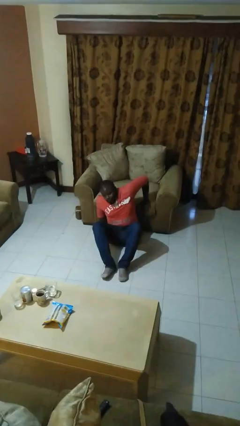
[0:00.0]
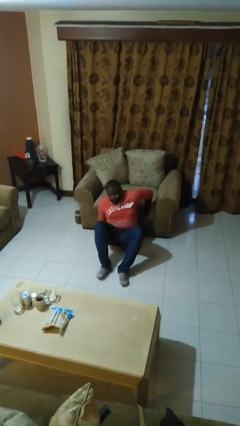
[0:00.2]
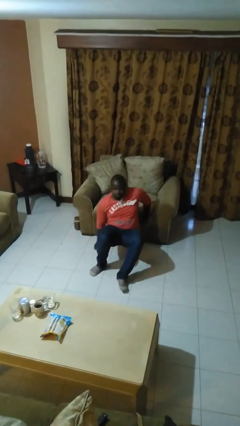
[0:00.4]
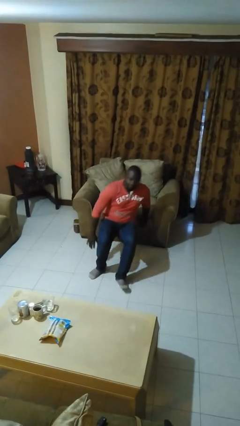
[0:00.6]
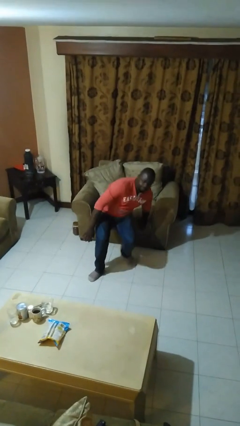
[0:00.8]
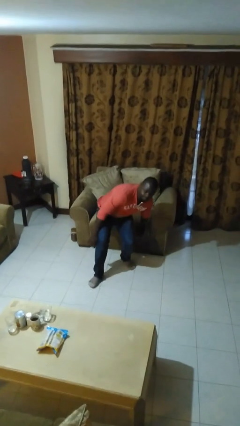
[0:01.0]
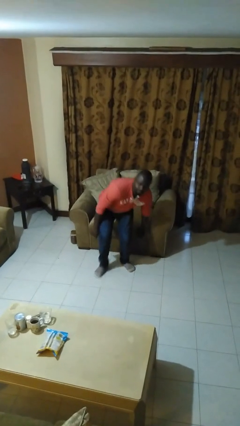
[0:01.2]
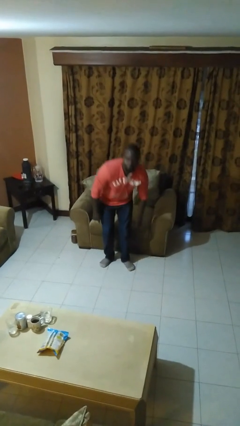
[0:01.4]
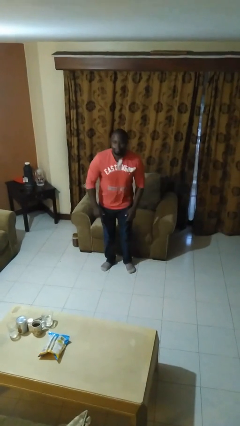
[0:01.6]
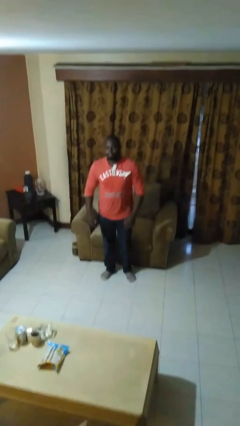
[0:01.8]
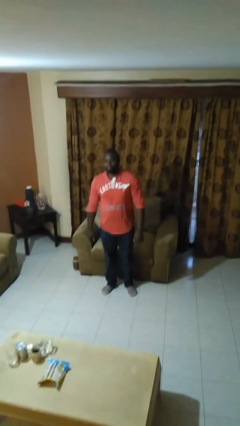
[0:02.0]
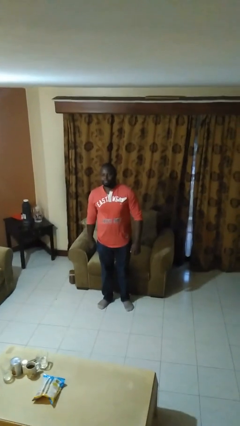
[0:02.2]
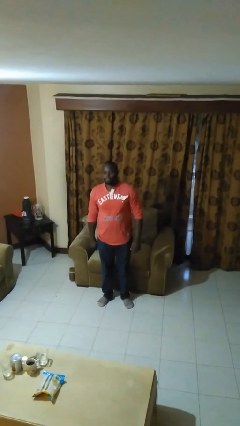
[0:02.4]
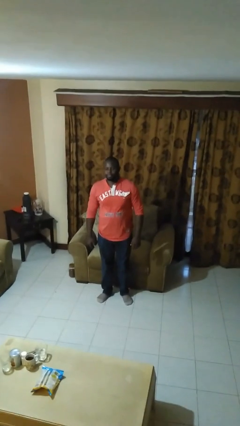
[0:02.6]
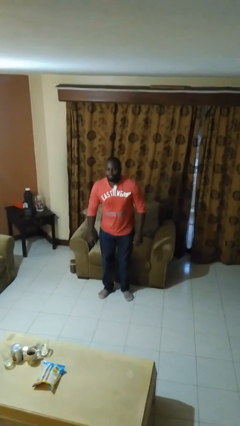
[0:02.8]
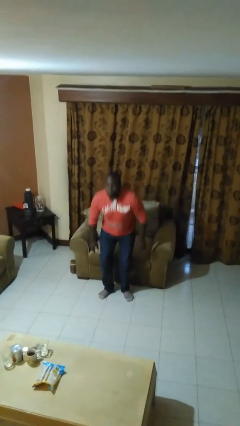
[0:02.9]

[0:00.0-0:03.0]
person stands up from floor

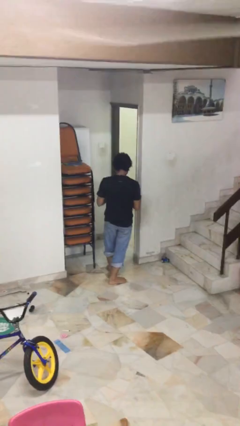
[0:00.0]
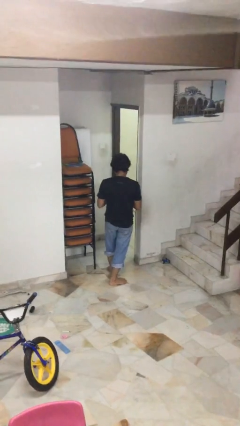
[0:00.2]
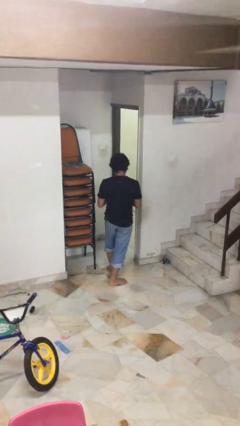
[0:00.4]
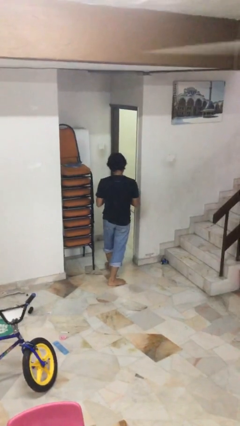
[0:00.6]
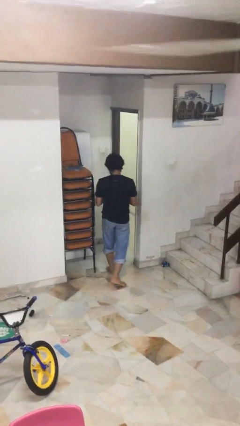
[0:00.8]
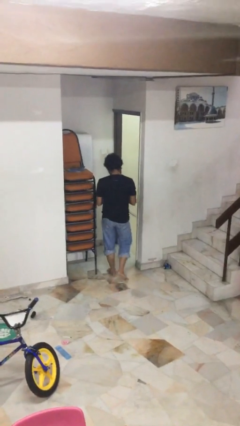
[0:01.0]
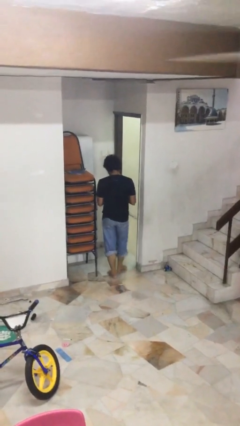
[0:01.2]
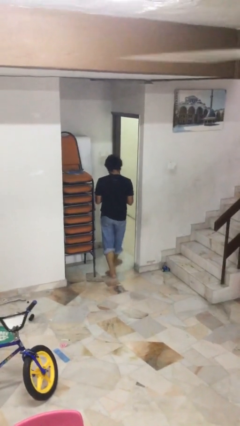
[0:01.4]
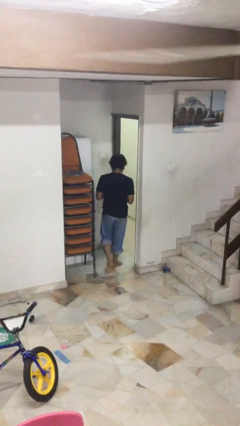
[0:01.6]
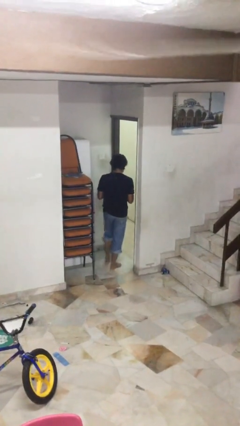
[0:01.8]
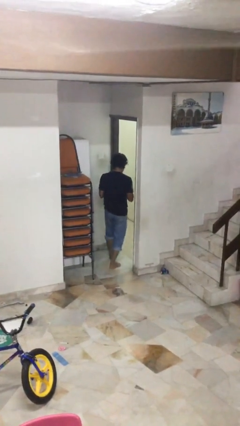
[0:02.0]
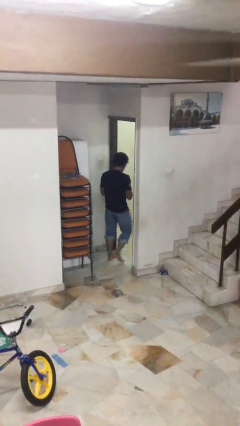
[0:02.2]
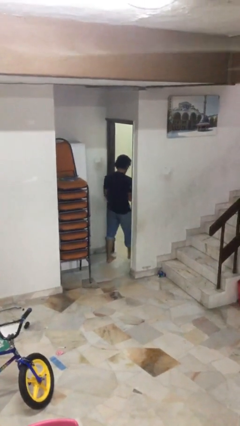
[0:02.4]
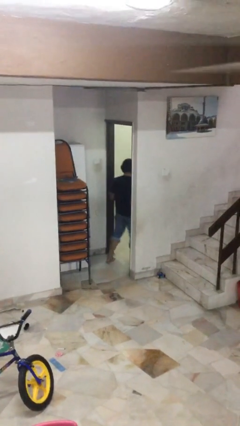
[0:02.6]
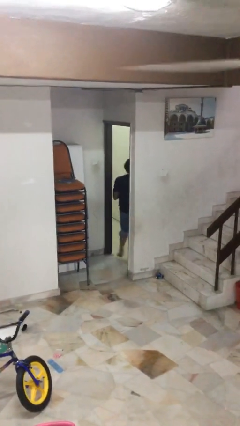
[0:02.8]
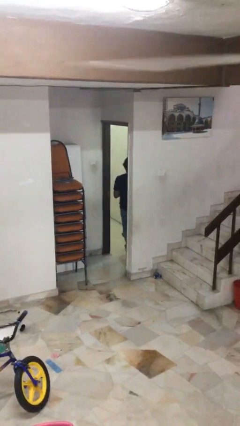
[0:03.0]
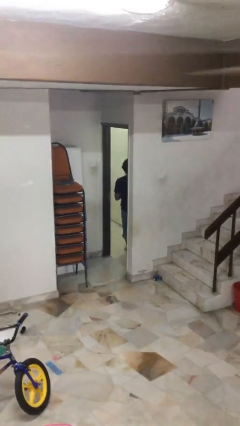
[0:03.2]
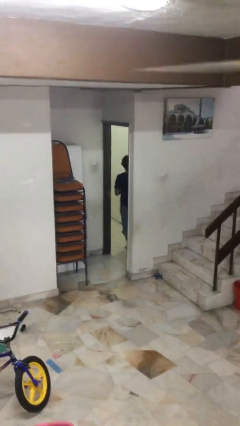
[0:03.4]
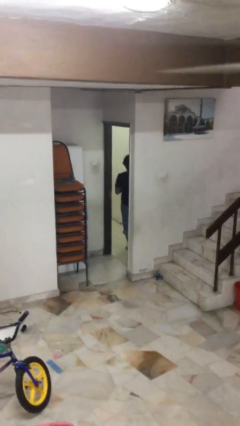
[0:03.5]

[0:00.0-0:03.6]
person exits scene through structure

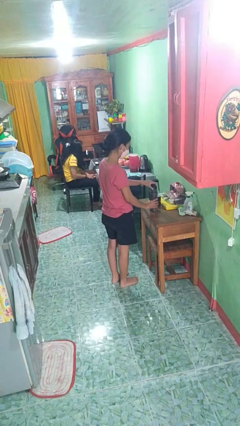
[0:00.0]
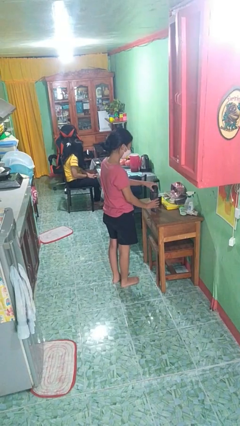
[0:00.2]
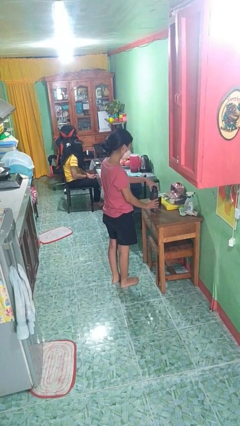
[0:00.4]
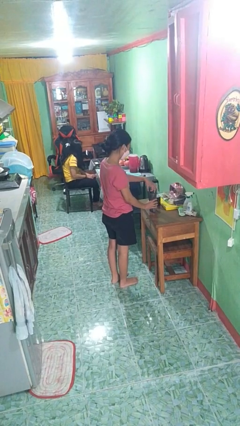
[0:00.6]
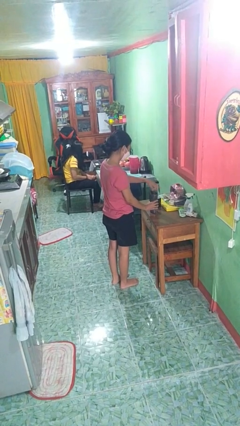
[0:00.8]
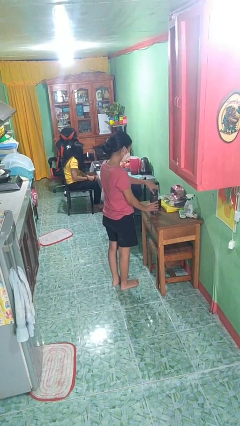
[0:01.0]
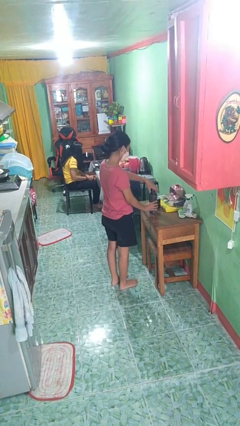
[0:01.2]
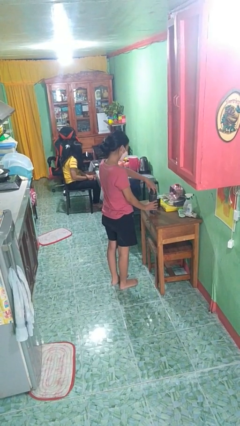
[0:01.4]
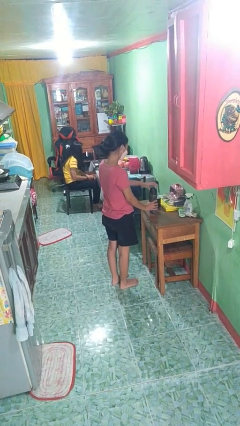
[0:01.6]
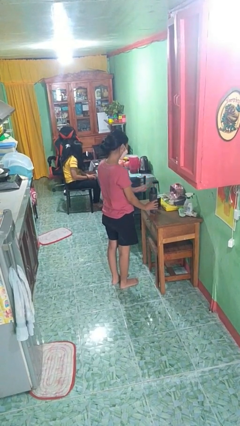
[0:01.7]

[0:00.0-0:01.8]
person screws lid to bottle

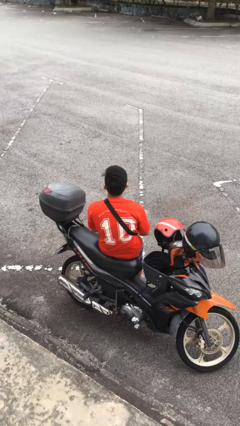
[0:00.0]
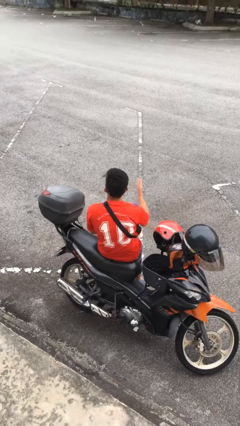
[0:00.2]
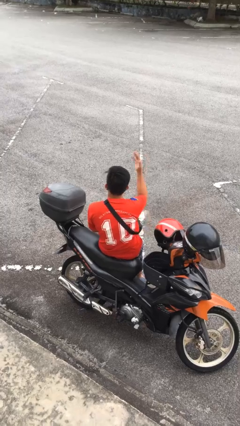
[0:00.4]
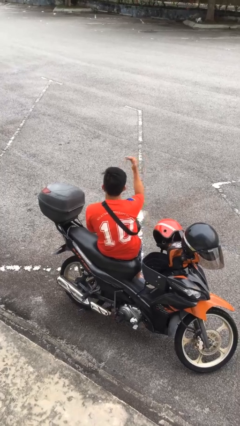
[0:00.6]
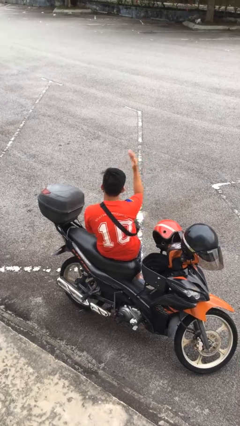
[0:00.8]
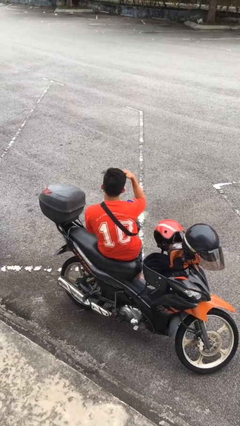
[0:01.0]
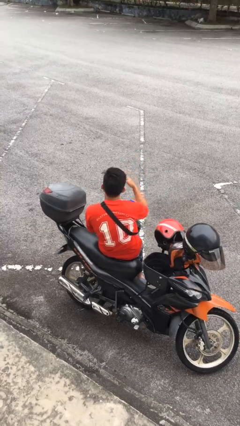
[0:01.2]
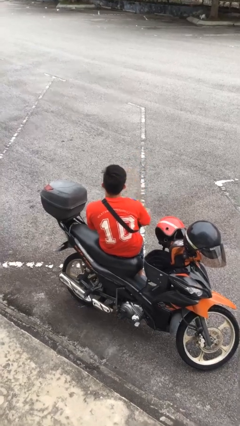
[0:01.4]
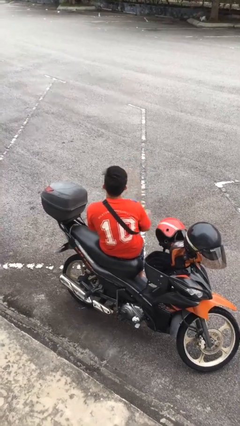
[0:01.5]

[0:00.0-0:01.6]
person gestures come here

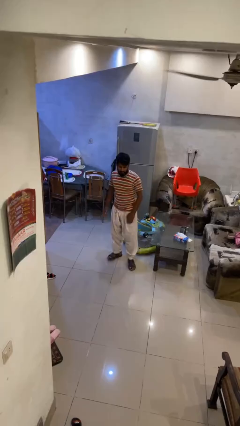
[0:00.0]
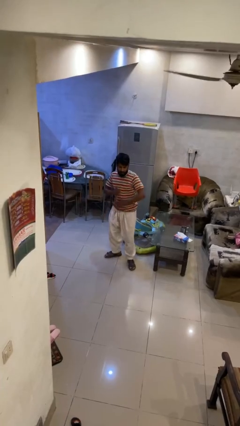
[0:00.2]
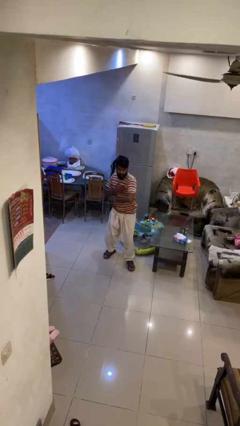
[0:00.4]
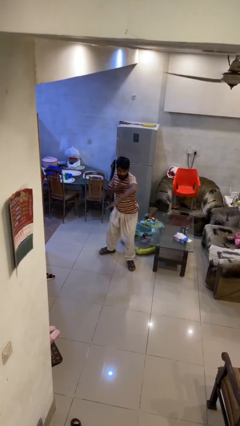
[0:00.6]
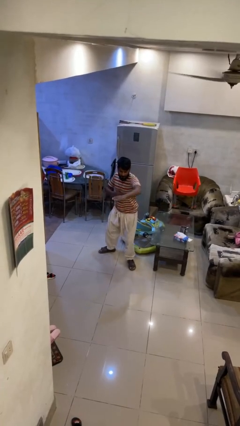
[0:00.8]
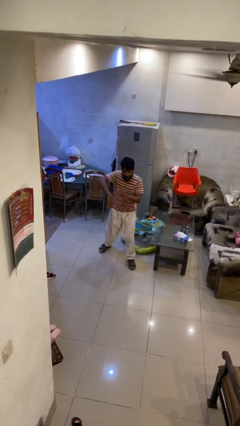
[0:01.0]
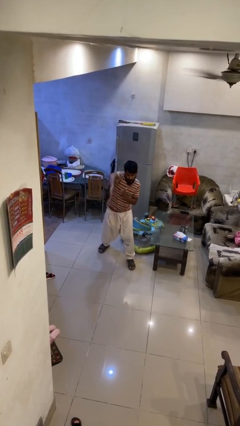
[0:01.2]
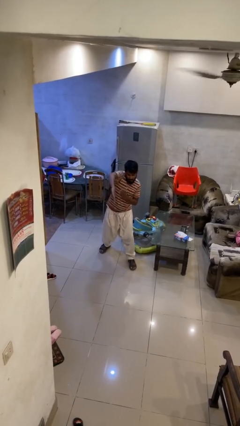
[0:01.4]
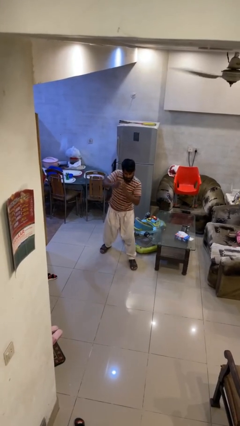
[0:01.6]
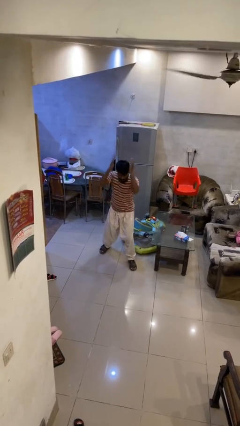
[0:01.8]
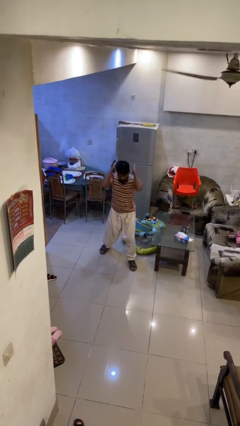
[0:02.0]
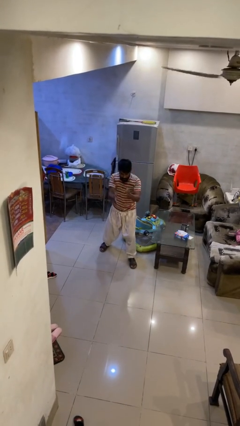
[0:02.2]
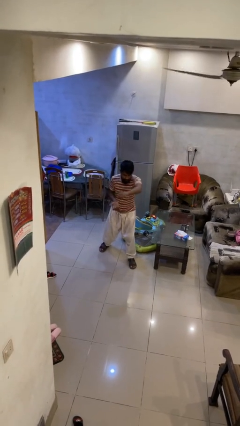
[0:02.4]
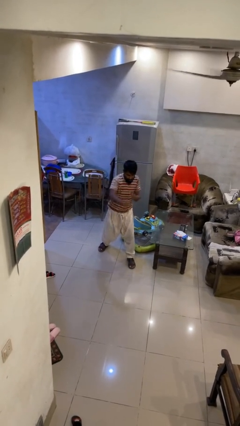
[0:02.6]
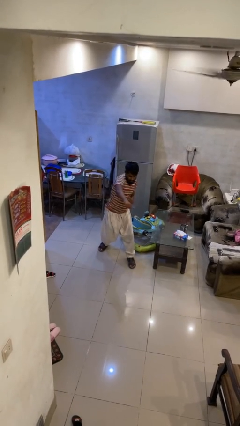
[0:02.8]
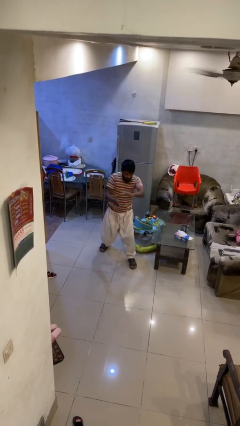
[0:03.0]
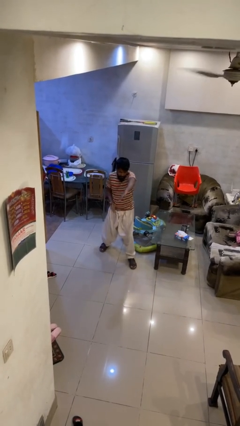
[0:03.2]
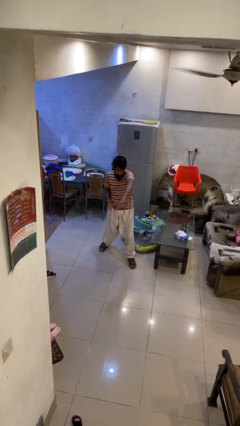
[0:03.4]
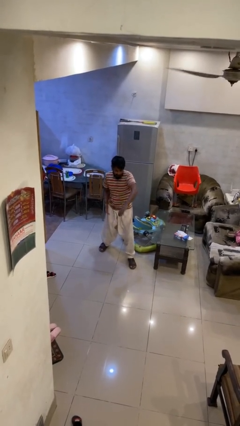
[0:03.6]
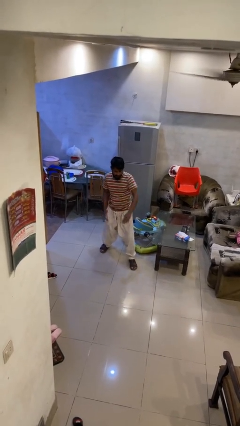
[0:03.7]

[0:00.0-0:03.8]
person karate chop

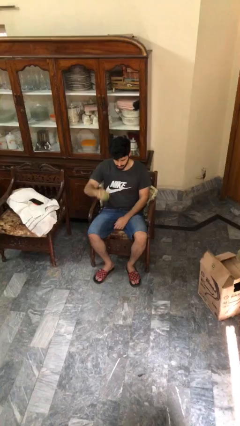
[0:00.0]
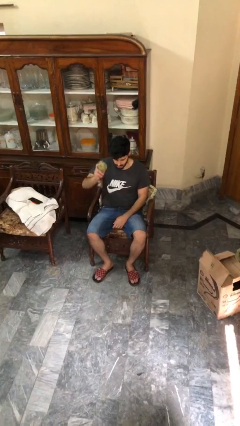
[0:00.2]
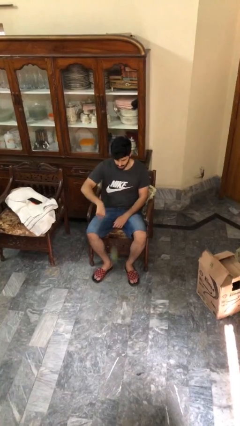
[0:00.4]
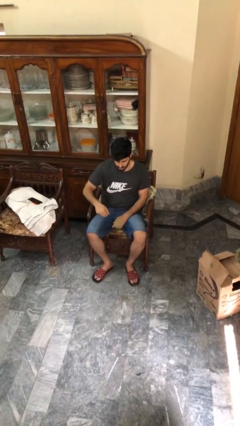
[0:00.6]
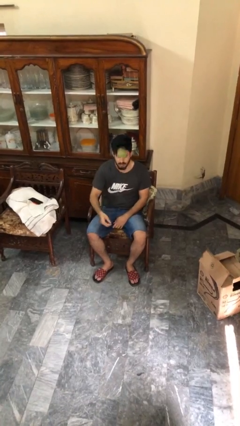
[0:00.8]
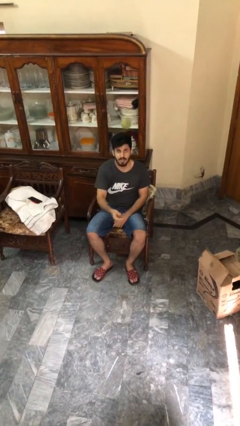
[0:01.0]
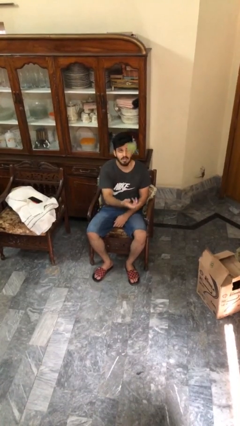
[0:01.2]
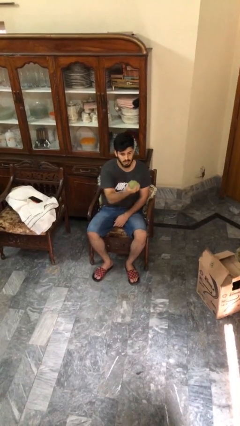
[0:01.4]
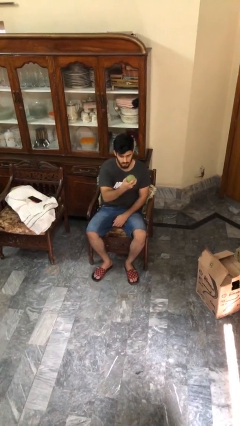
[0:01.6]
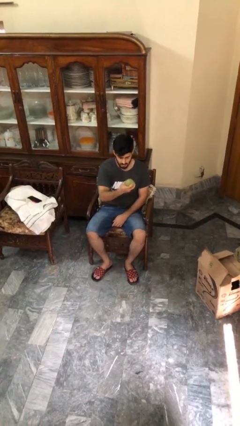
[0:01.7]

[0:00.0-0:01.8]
person bounces ball on floor

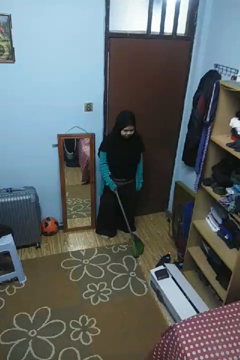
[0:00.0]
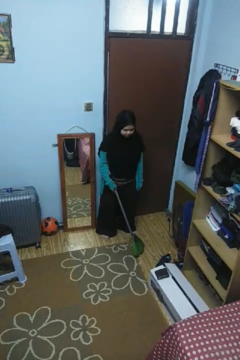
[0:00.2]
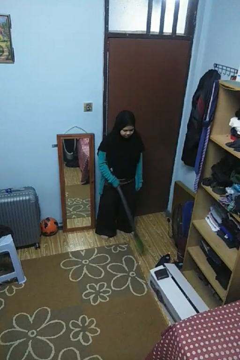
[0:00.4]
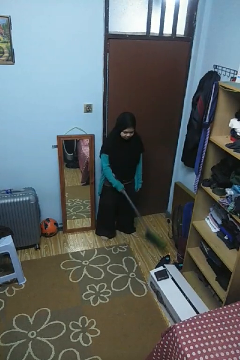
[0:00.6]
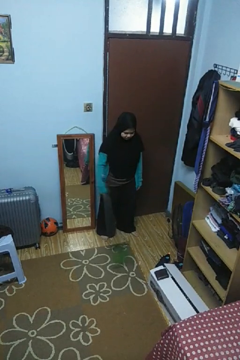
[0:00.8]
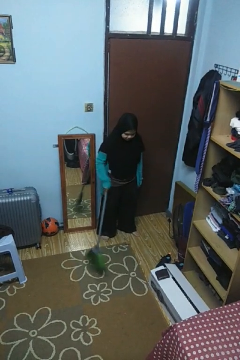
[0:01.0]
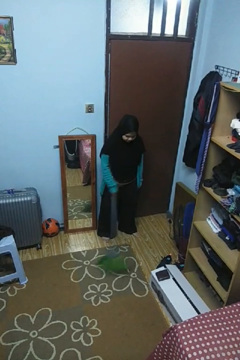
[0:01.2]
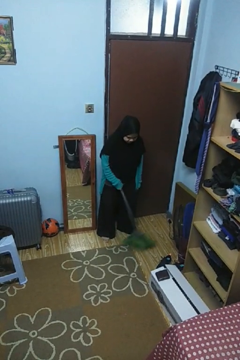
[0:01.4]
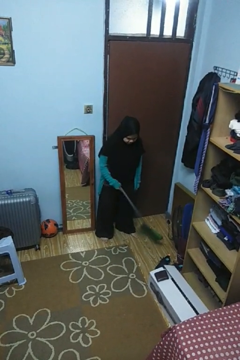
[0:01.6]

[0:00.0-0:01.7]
person sweeps floor

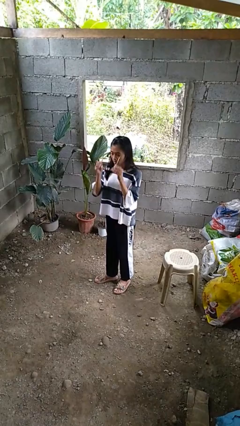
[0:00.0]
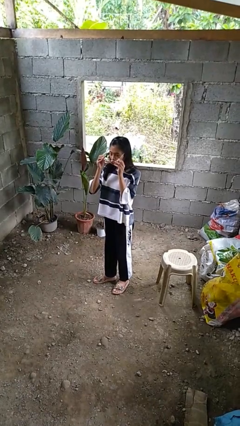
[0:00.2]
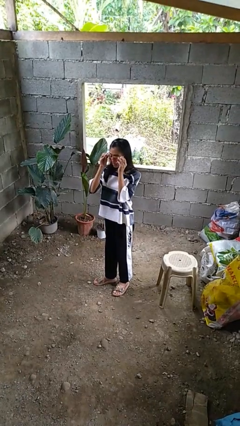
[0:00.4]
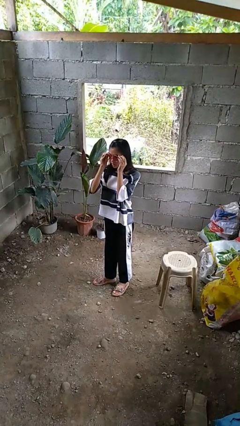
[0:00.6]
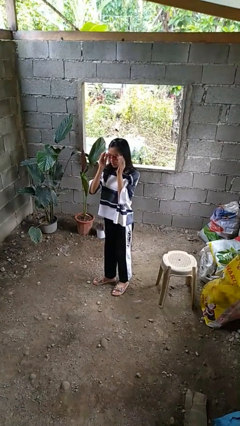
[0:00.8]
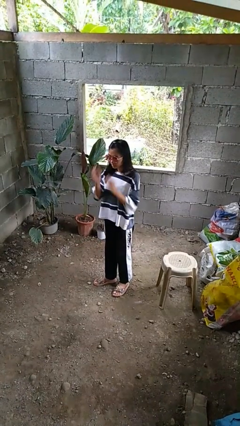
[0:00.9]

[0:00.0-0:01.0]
person puts on sunglasses
